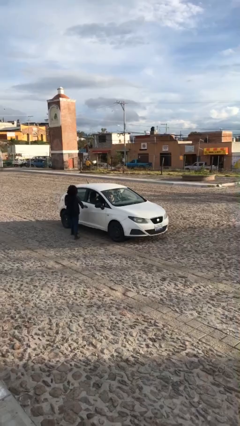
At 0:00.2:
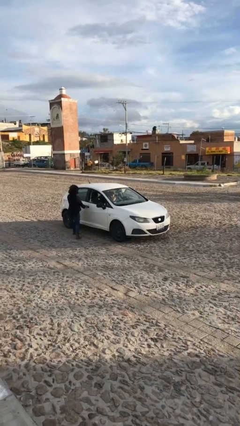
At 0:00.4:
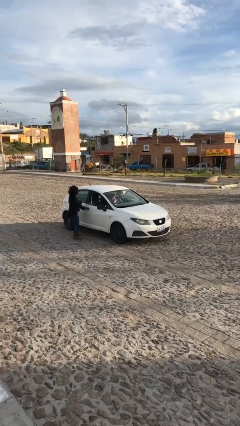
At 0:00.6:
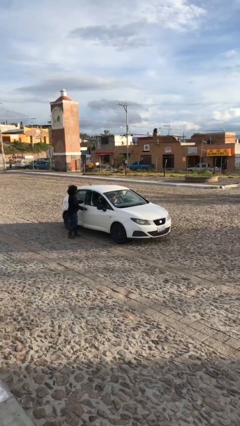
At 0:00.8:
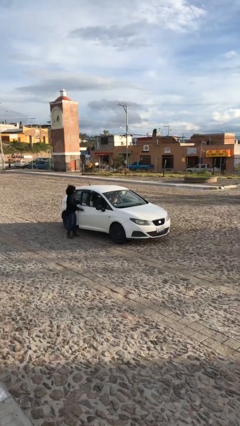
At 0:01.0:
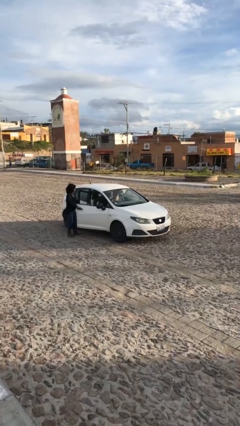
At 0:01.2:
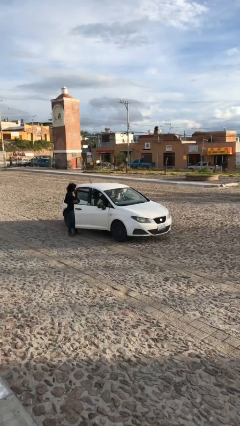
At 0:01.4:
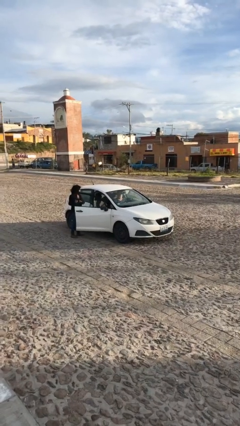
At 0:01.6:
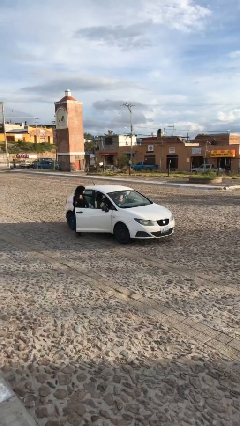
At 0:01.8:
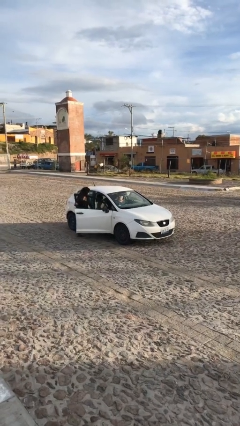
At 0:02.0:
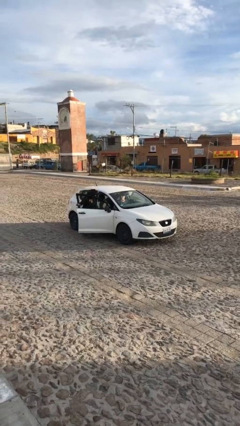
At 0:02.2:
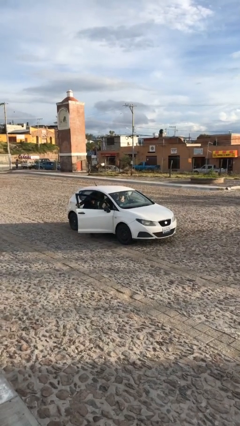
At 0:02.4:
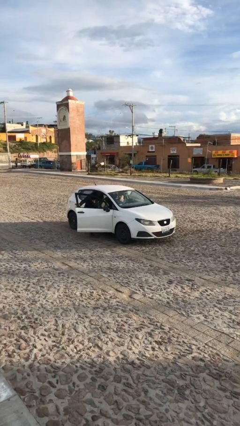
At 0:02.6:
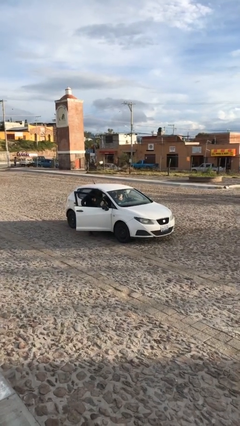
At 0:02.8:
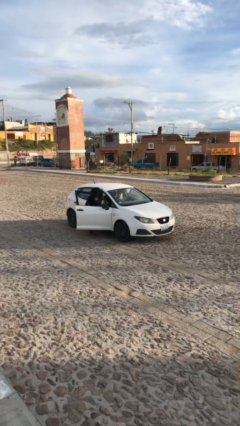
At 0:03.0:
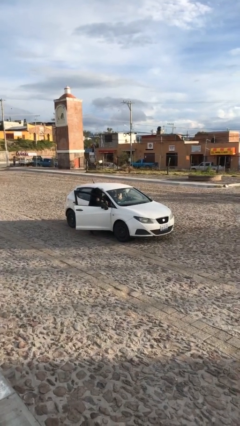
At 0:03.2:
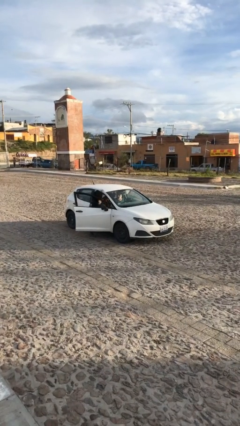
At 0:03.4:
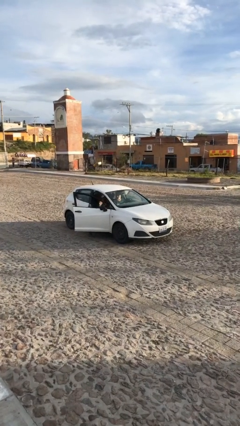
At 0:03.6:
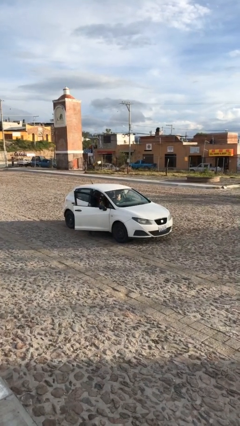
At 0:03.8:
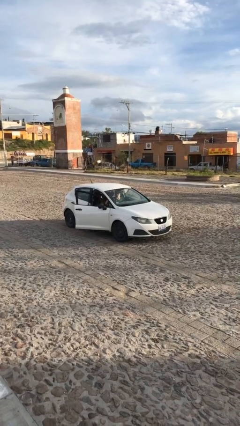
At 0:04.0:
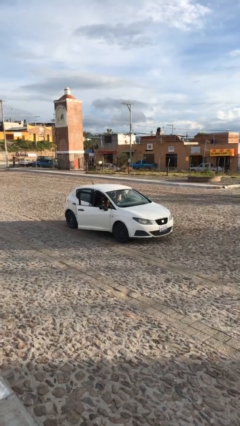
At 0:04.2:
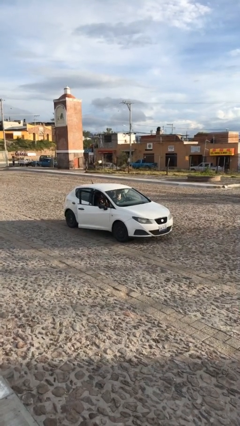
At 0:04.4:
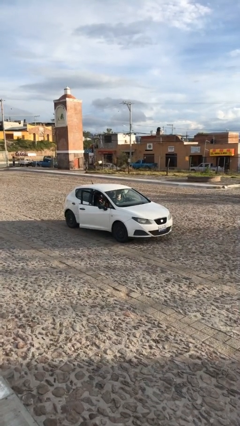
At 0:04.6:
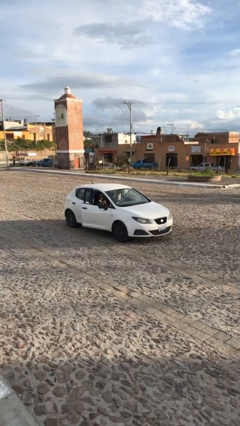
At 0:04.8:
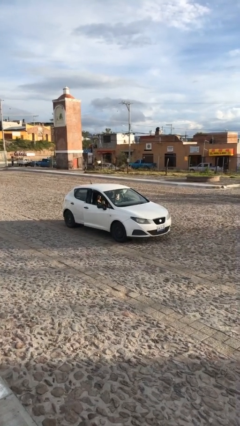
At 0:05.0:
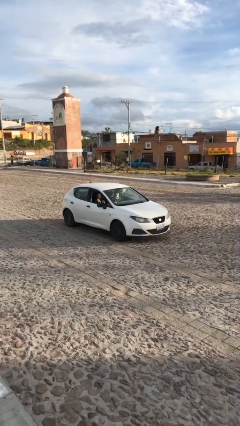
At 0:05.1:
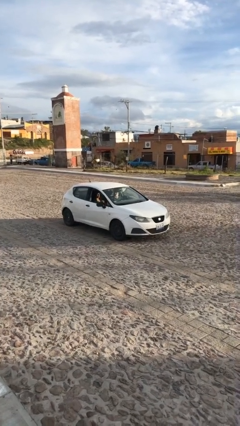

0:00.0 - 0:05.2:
car picks up person

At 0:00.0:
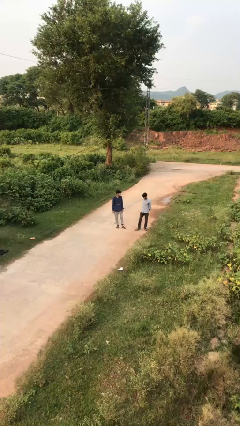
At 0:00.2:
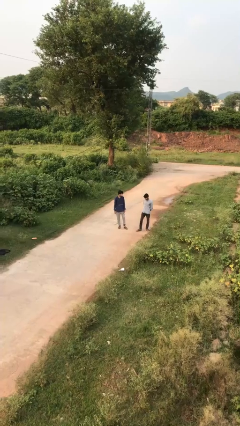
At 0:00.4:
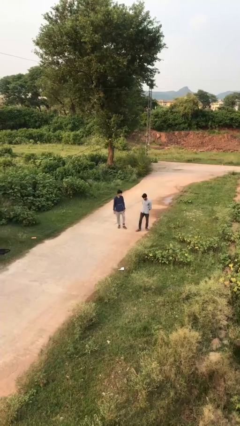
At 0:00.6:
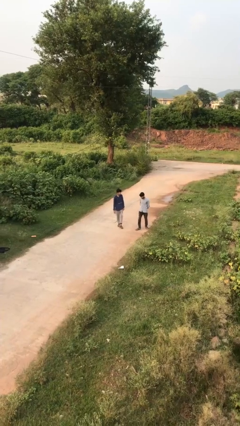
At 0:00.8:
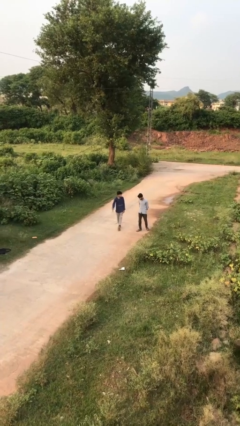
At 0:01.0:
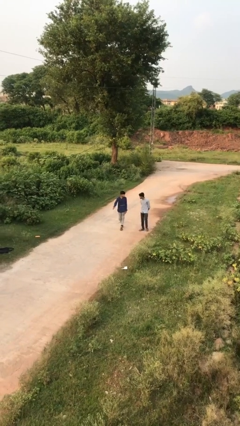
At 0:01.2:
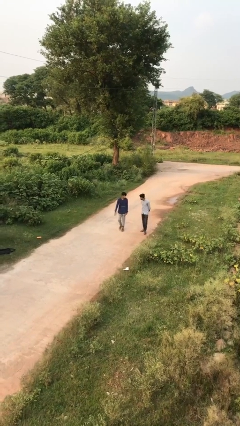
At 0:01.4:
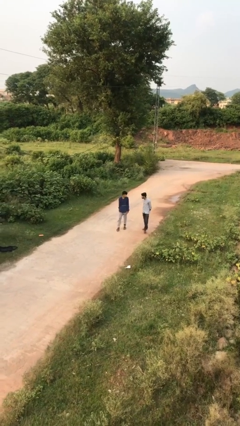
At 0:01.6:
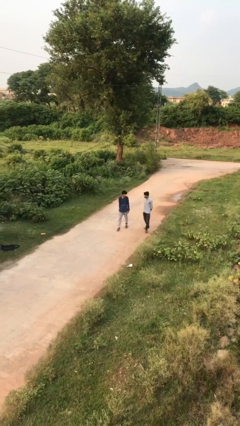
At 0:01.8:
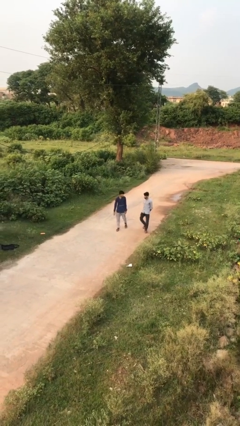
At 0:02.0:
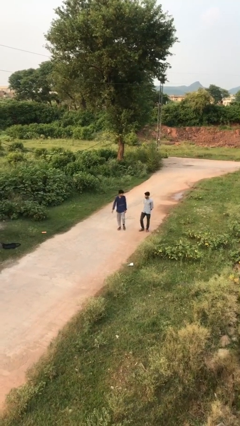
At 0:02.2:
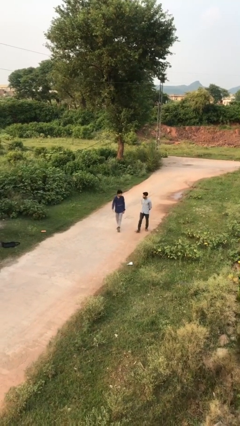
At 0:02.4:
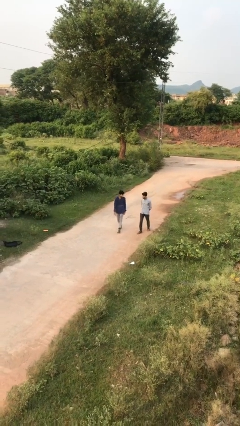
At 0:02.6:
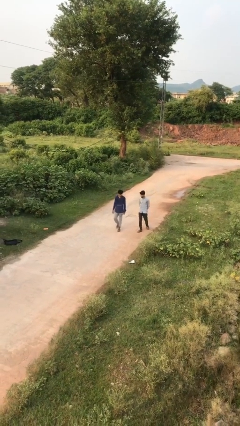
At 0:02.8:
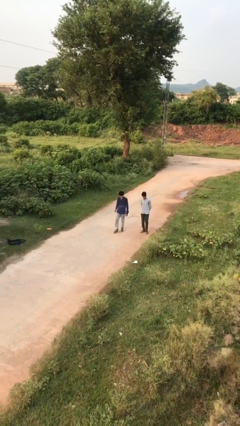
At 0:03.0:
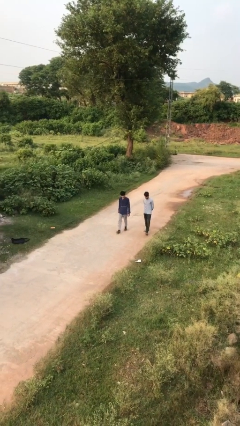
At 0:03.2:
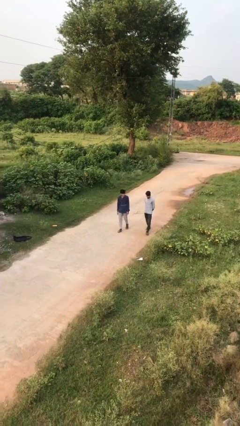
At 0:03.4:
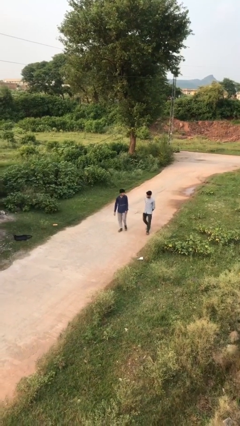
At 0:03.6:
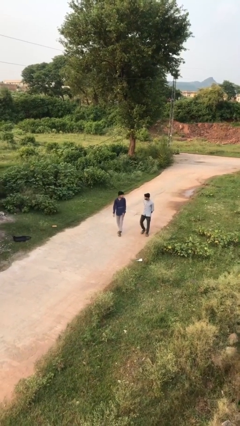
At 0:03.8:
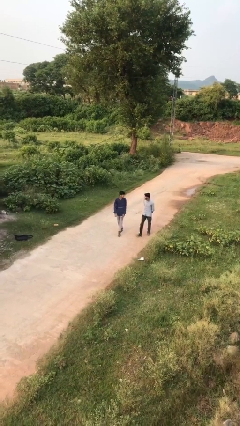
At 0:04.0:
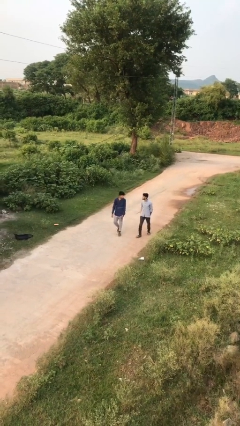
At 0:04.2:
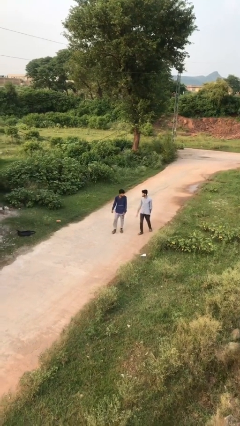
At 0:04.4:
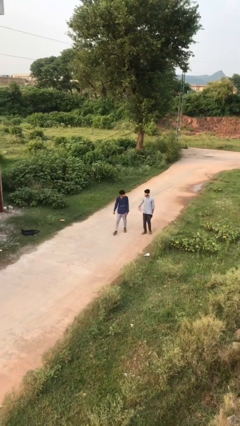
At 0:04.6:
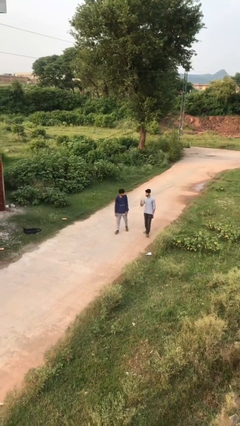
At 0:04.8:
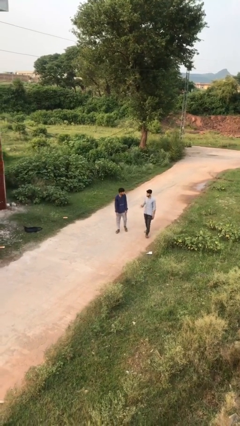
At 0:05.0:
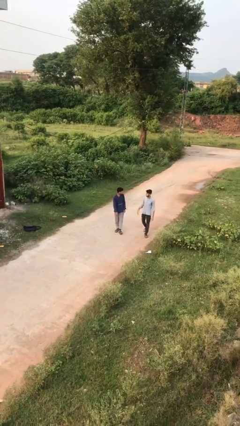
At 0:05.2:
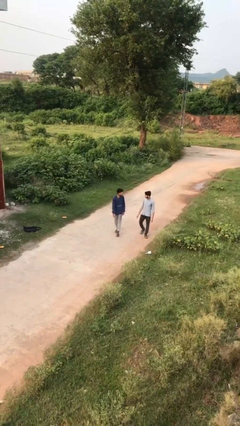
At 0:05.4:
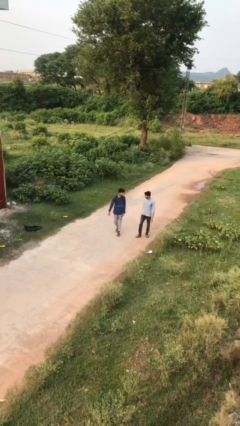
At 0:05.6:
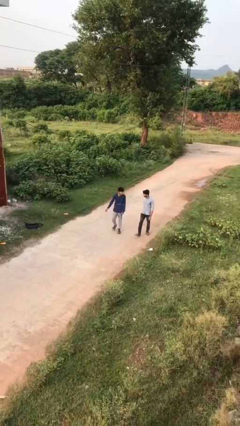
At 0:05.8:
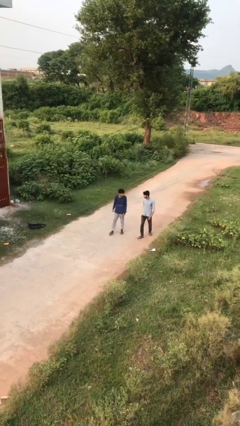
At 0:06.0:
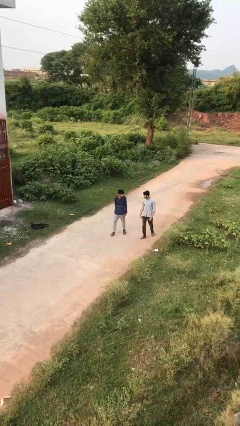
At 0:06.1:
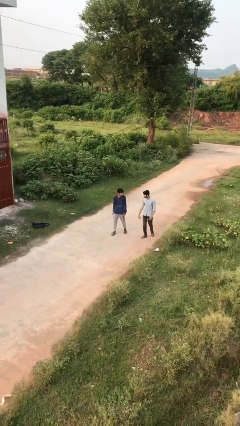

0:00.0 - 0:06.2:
person talks to person

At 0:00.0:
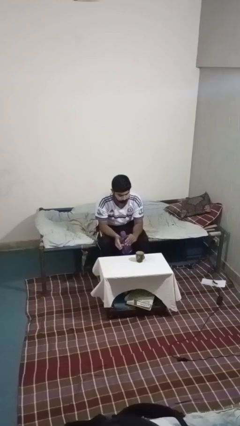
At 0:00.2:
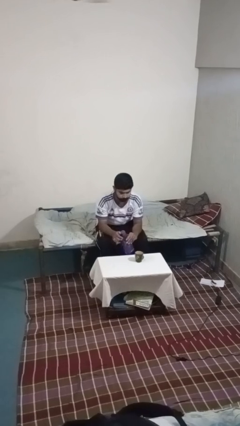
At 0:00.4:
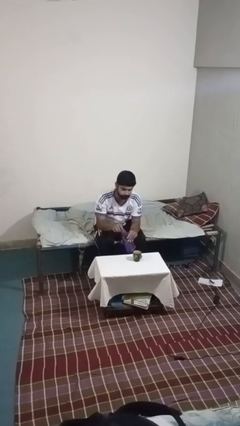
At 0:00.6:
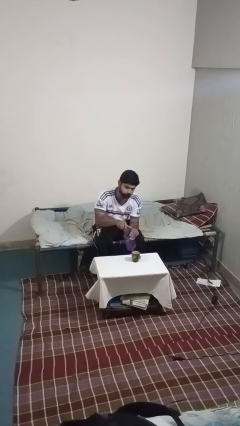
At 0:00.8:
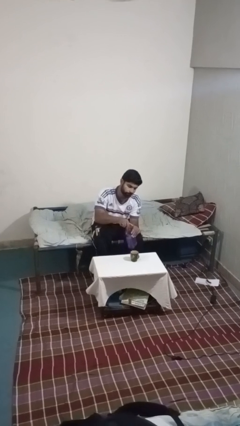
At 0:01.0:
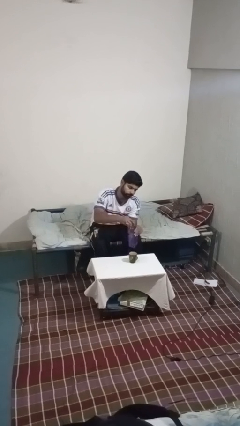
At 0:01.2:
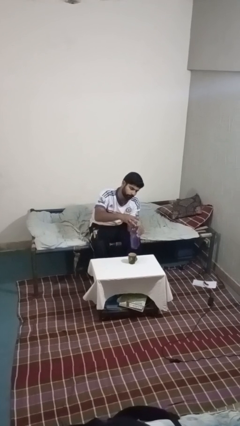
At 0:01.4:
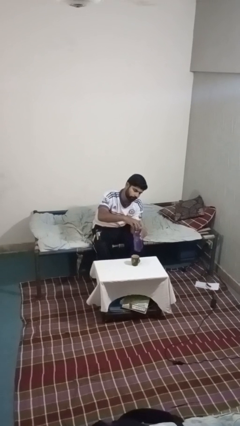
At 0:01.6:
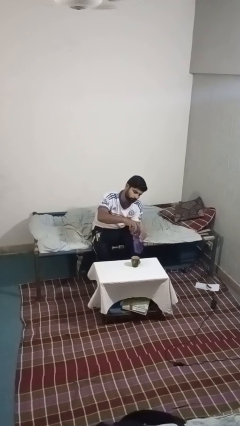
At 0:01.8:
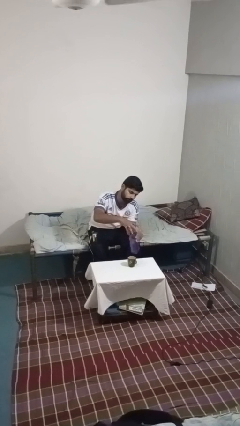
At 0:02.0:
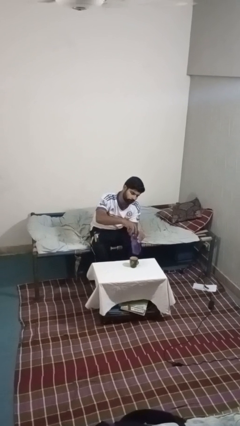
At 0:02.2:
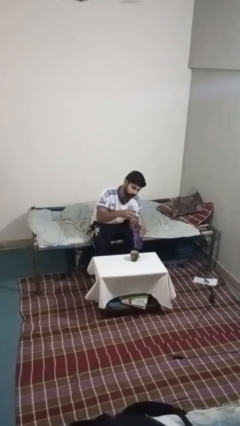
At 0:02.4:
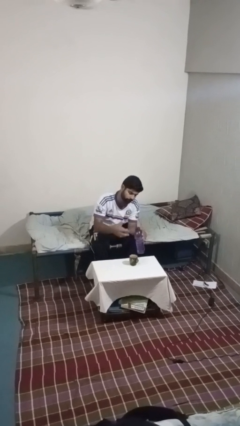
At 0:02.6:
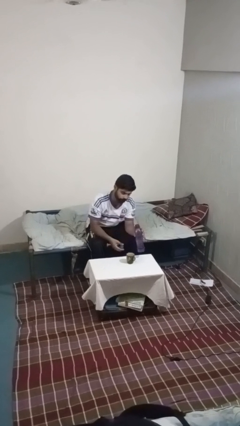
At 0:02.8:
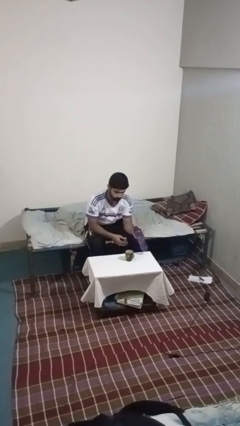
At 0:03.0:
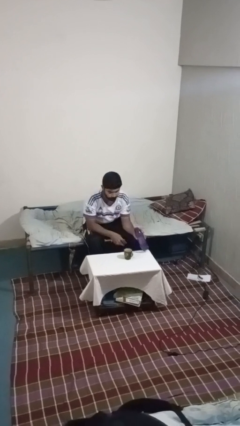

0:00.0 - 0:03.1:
person unscrews lid from bottle

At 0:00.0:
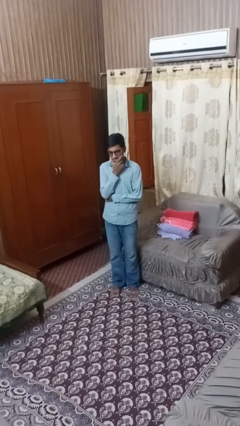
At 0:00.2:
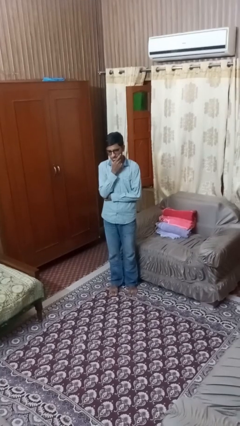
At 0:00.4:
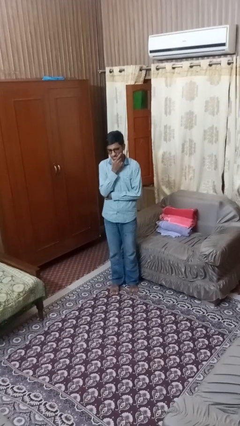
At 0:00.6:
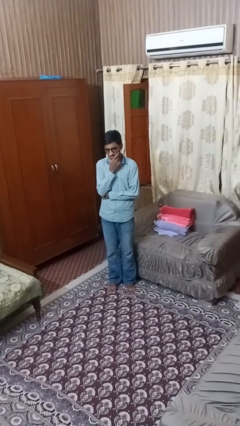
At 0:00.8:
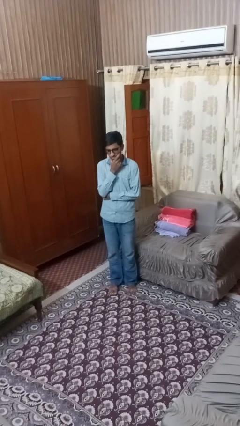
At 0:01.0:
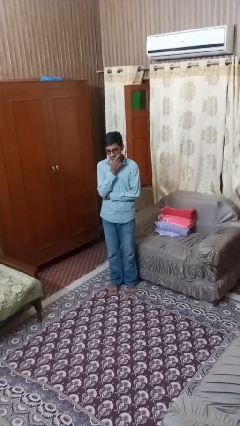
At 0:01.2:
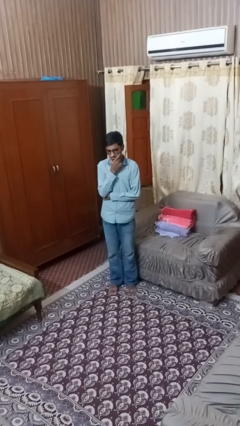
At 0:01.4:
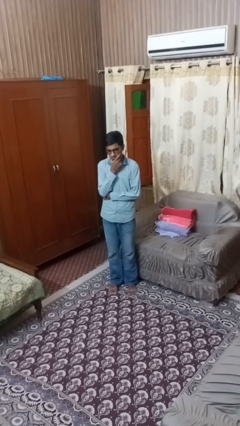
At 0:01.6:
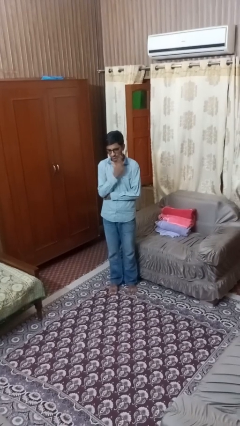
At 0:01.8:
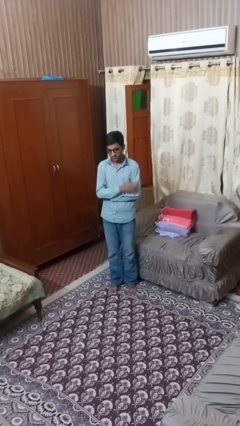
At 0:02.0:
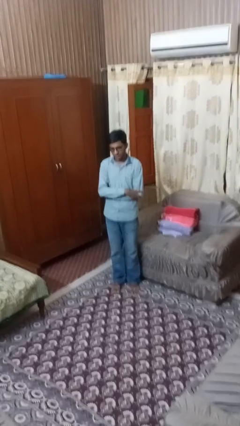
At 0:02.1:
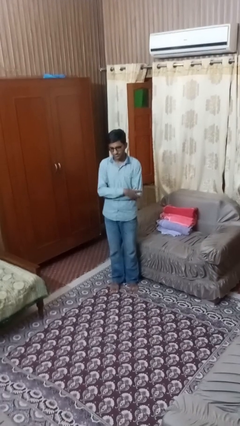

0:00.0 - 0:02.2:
person strokes chin

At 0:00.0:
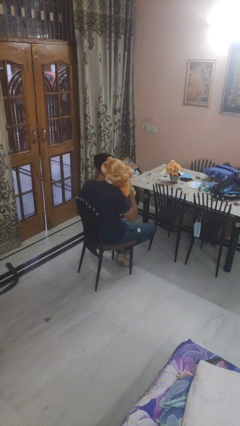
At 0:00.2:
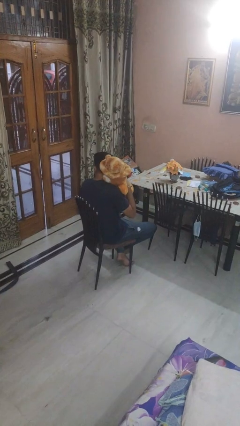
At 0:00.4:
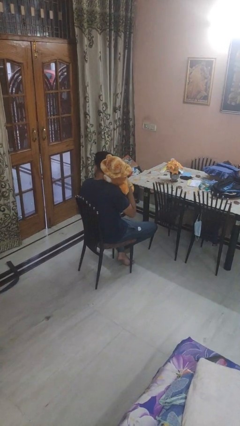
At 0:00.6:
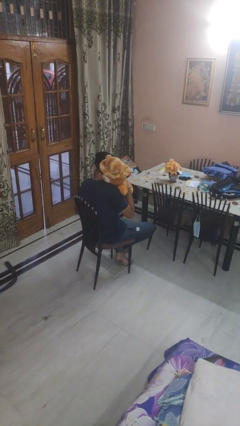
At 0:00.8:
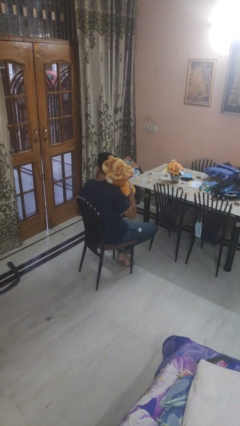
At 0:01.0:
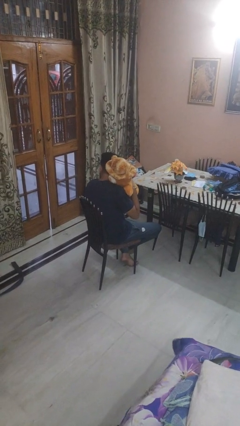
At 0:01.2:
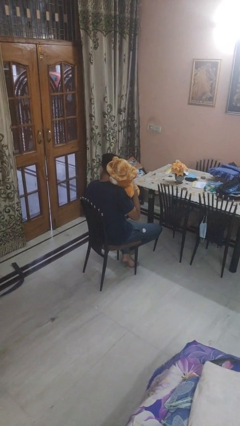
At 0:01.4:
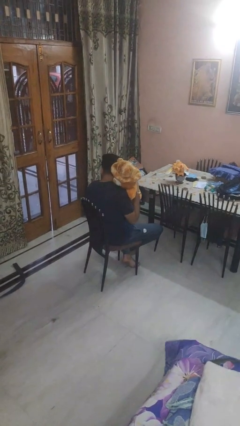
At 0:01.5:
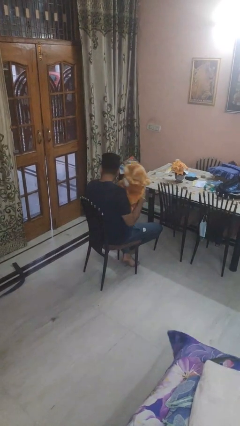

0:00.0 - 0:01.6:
person hugs stuffed animal
